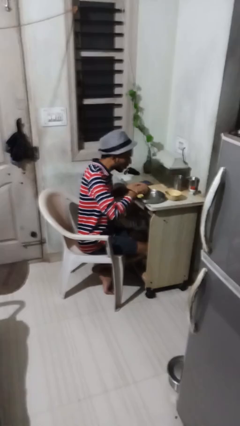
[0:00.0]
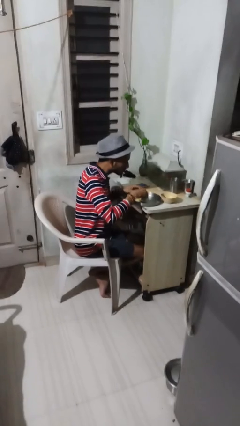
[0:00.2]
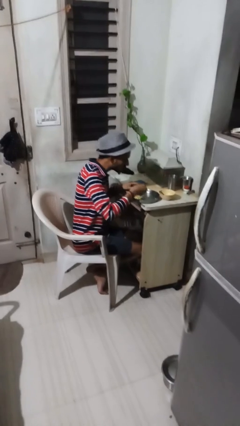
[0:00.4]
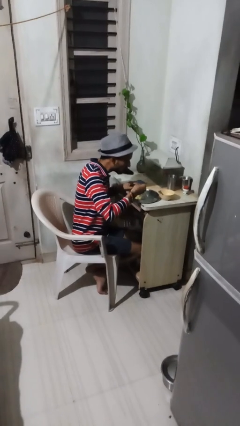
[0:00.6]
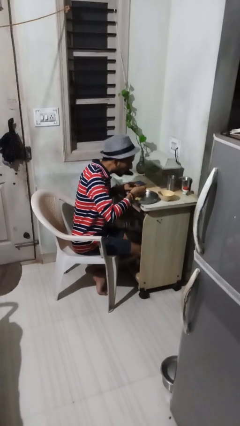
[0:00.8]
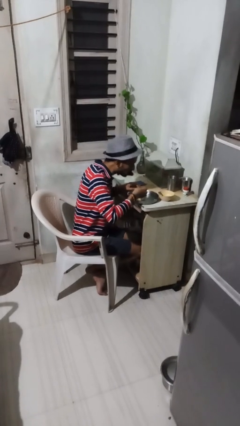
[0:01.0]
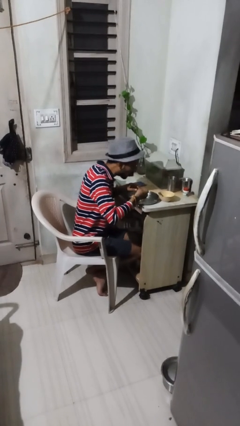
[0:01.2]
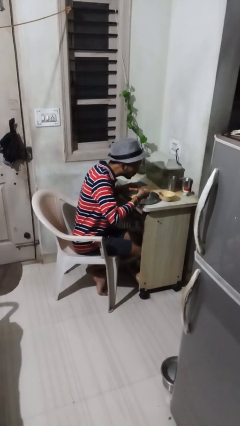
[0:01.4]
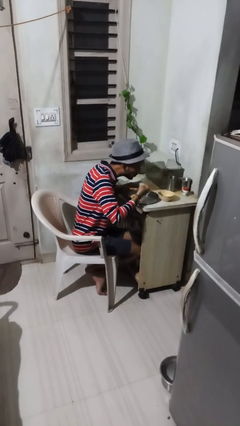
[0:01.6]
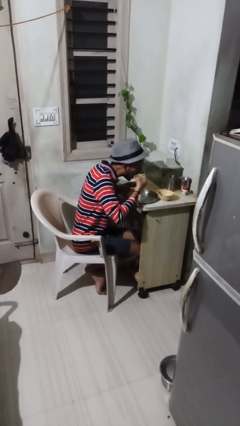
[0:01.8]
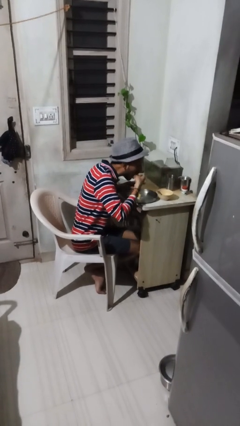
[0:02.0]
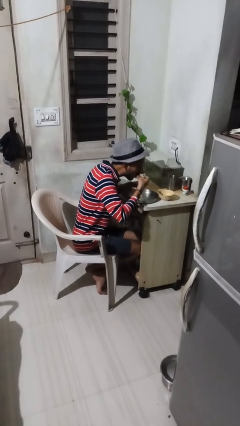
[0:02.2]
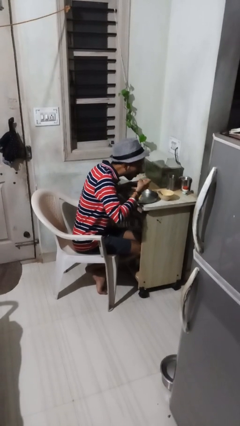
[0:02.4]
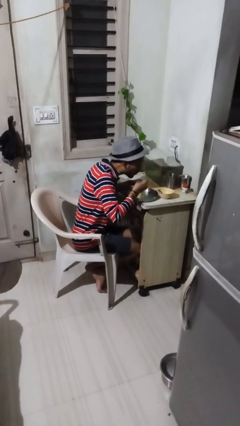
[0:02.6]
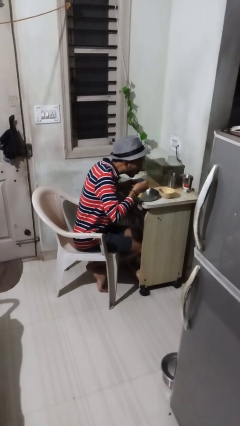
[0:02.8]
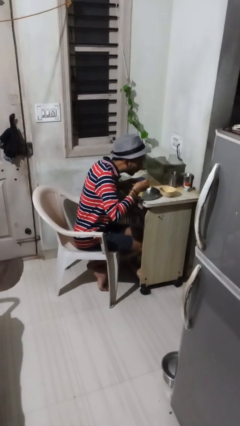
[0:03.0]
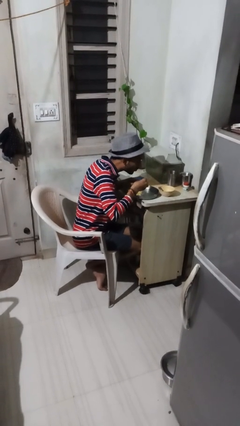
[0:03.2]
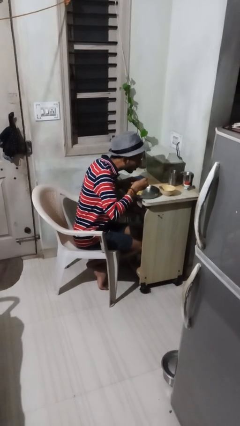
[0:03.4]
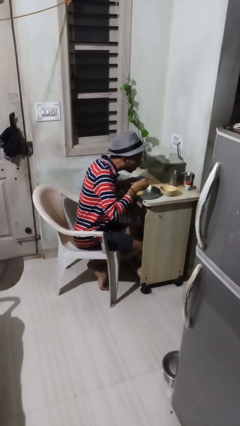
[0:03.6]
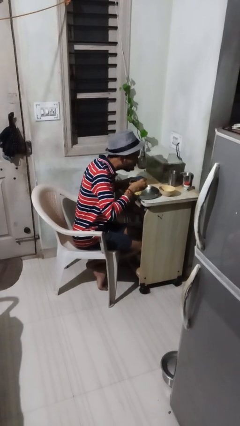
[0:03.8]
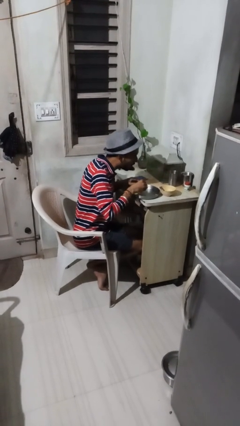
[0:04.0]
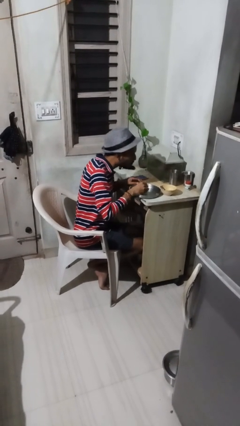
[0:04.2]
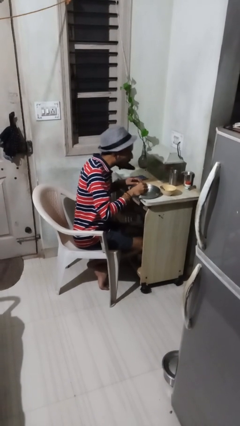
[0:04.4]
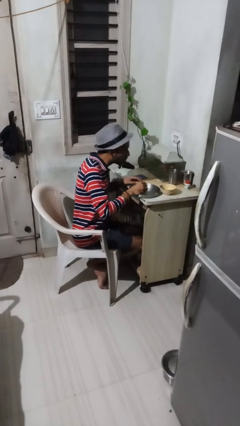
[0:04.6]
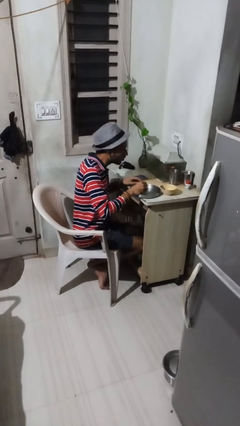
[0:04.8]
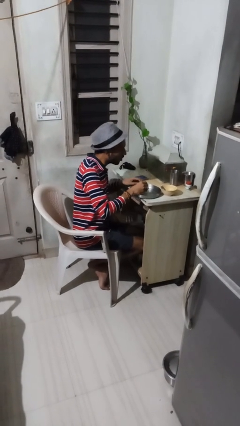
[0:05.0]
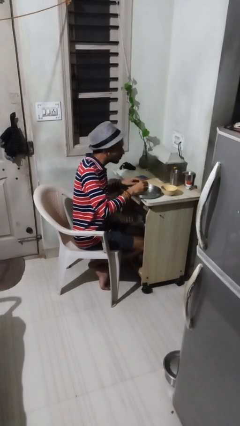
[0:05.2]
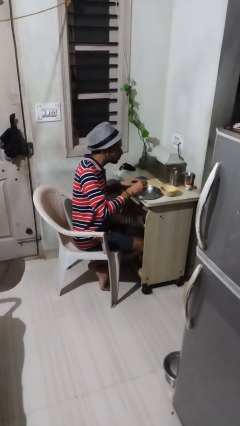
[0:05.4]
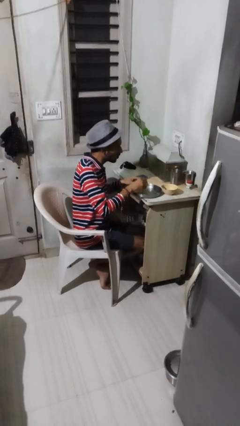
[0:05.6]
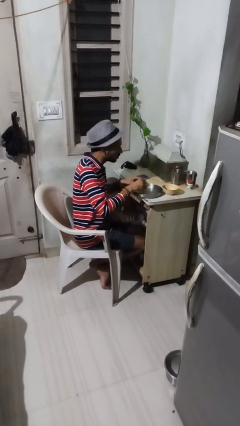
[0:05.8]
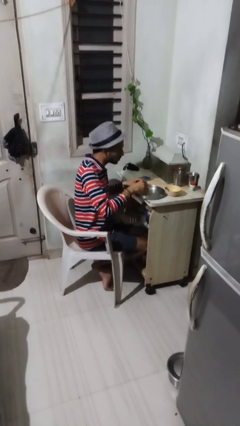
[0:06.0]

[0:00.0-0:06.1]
person eats with utensil

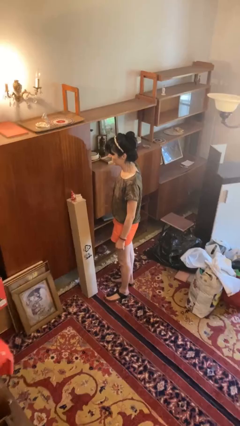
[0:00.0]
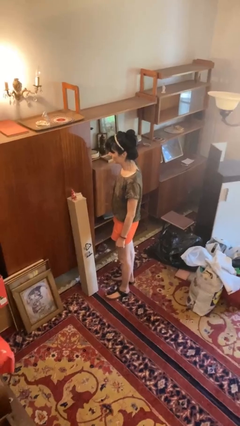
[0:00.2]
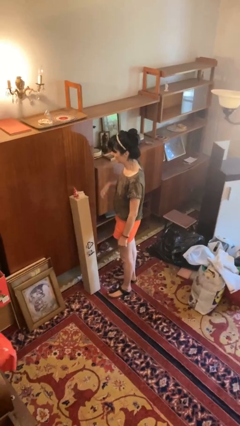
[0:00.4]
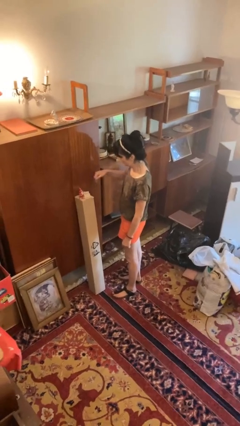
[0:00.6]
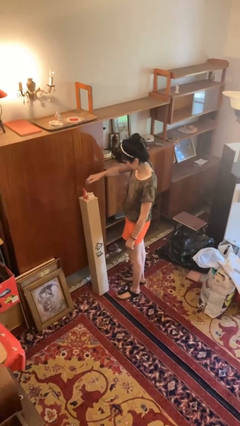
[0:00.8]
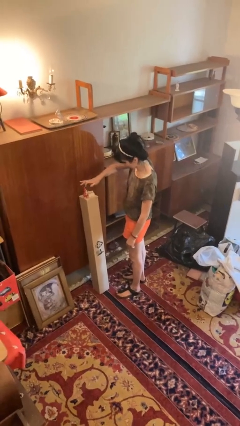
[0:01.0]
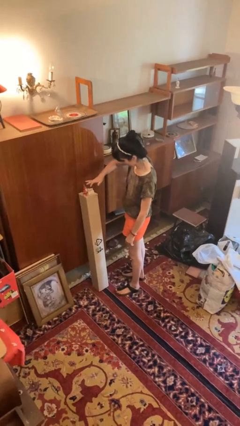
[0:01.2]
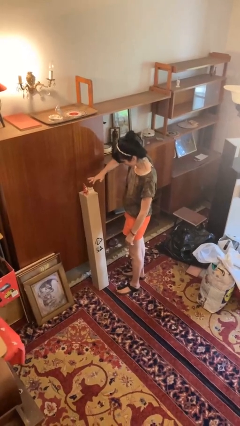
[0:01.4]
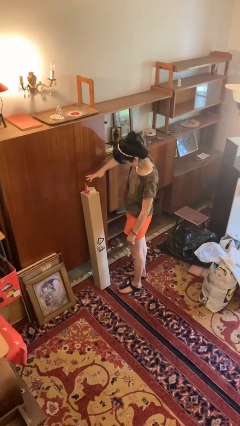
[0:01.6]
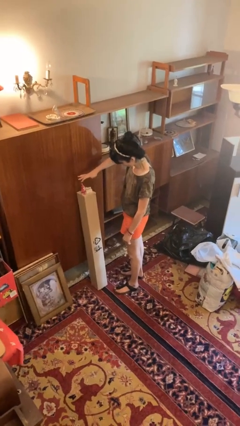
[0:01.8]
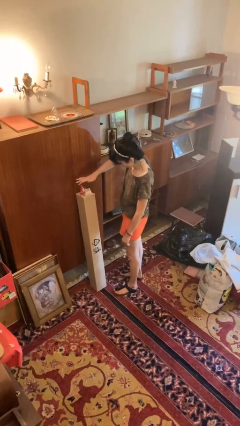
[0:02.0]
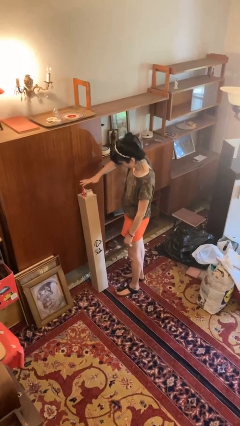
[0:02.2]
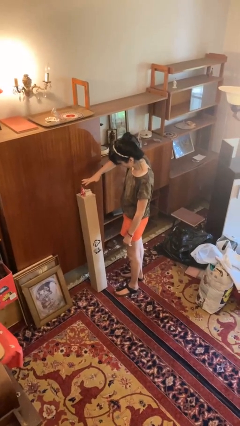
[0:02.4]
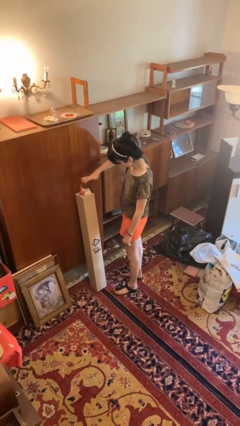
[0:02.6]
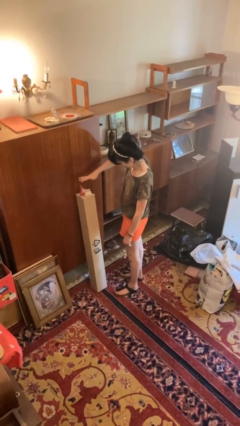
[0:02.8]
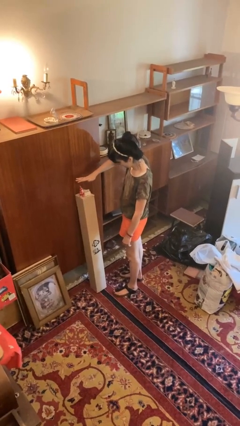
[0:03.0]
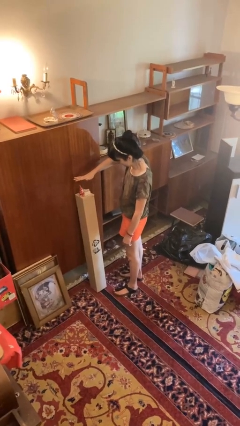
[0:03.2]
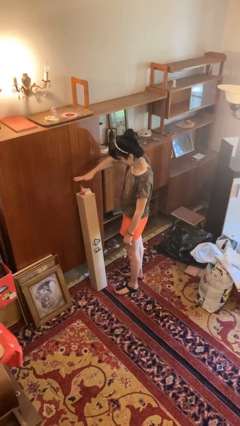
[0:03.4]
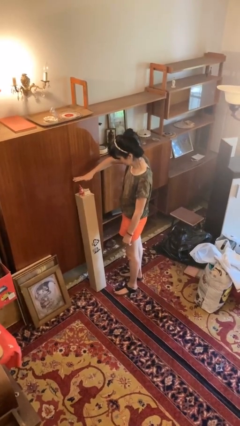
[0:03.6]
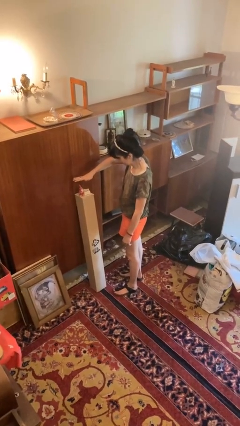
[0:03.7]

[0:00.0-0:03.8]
person waves hand over object

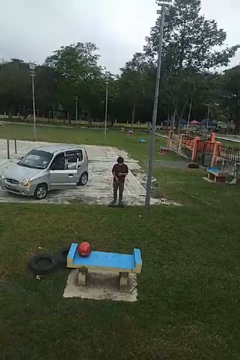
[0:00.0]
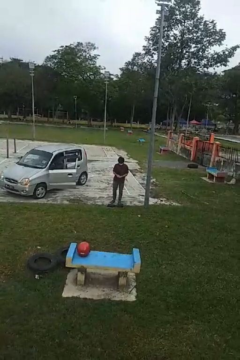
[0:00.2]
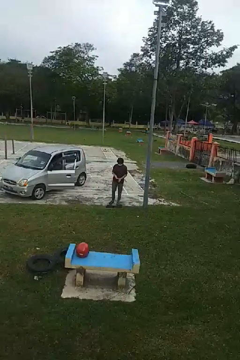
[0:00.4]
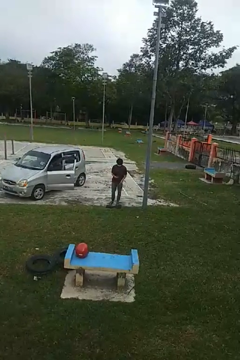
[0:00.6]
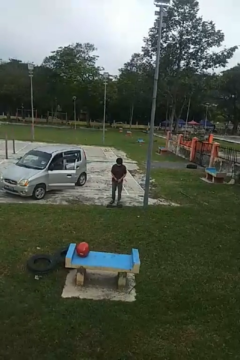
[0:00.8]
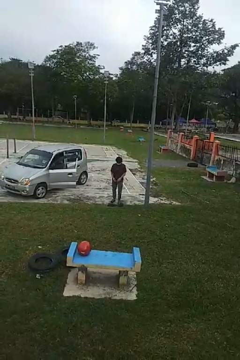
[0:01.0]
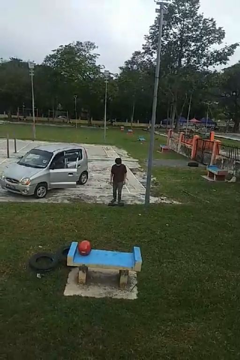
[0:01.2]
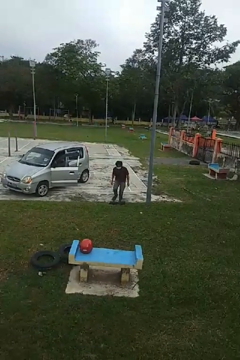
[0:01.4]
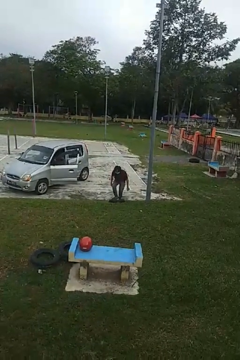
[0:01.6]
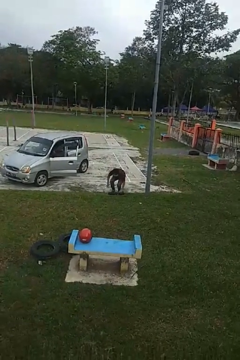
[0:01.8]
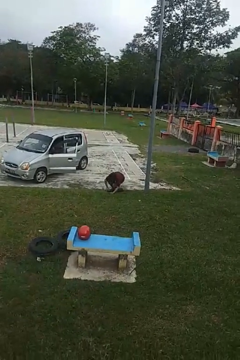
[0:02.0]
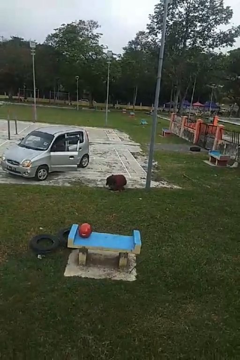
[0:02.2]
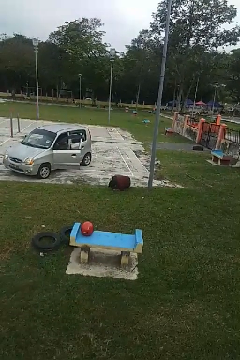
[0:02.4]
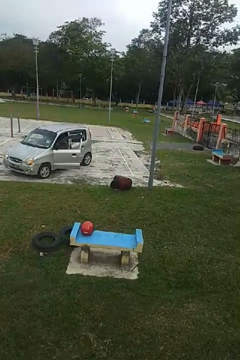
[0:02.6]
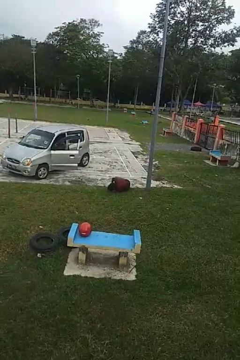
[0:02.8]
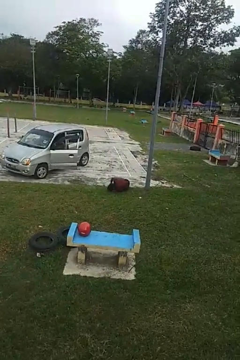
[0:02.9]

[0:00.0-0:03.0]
person trips on object on floor

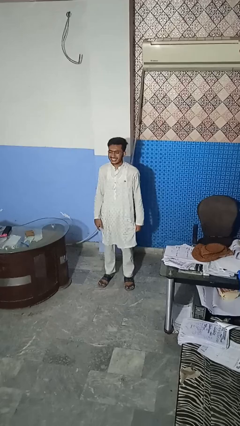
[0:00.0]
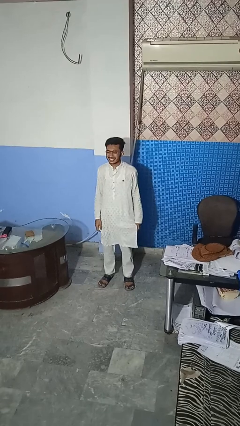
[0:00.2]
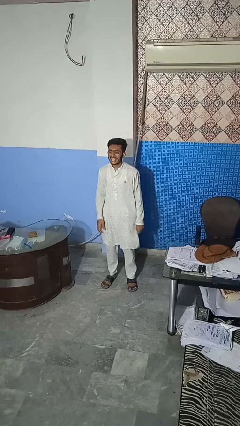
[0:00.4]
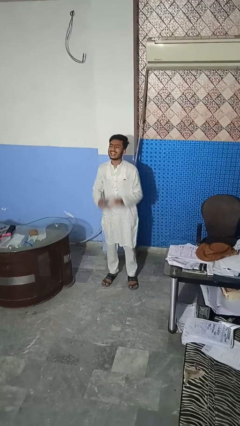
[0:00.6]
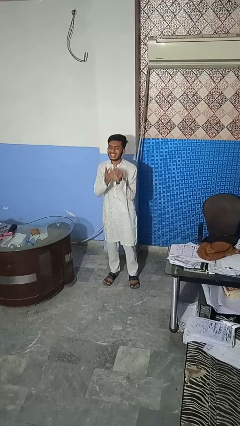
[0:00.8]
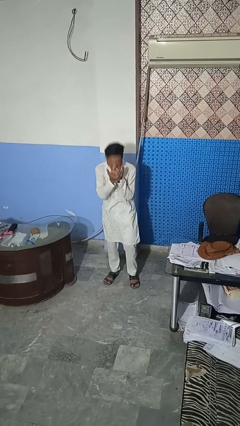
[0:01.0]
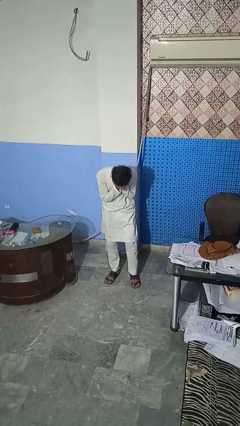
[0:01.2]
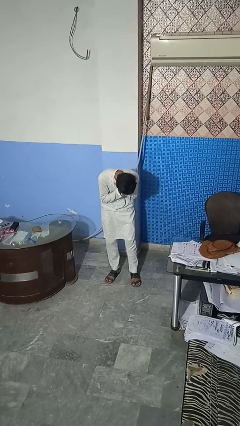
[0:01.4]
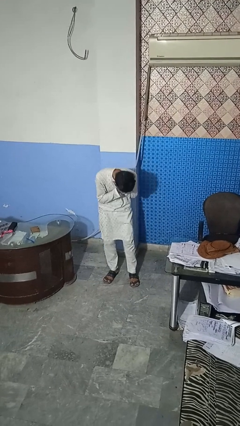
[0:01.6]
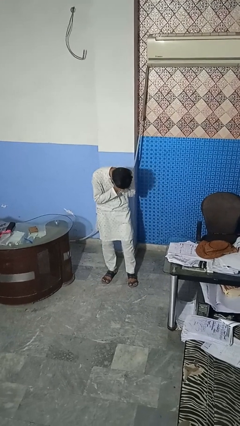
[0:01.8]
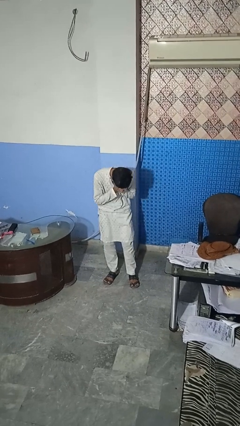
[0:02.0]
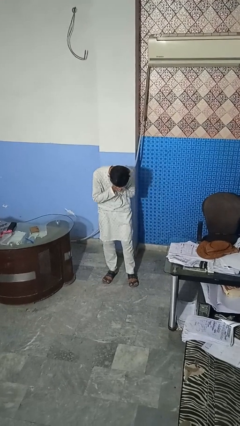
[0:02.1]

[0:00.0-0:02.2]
person sneezes into hand

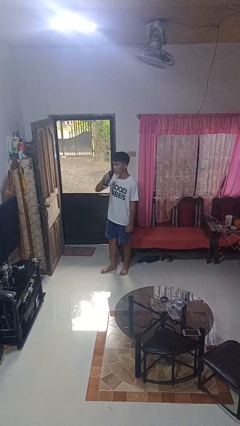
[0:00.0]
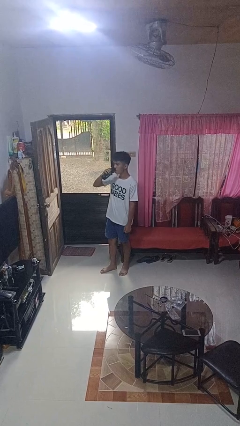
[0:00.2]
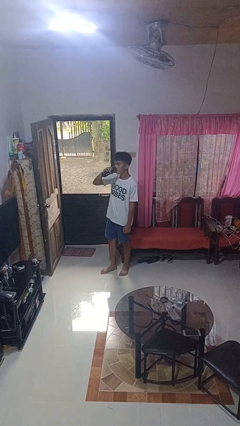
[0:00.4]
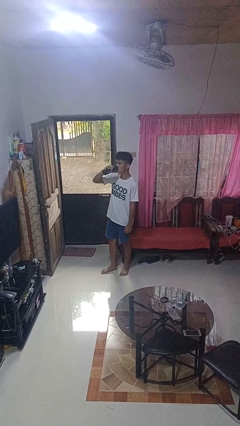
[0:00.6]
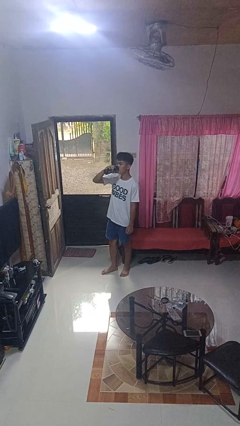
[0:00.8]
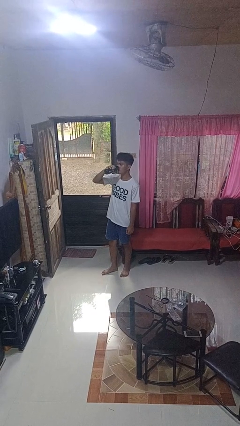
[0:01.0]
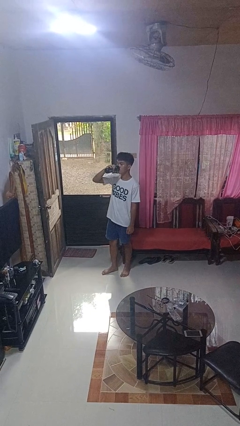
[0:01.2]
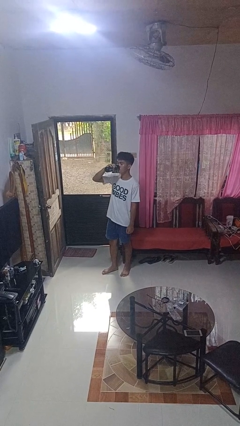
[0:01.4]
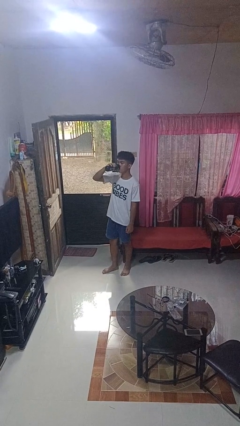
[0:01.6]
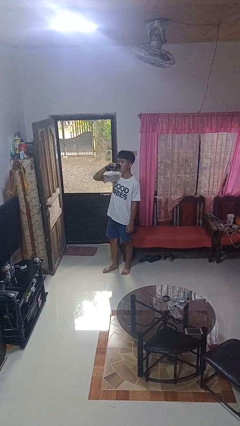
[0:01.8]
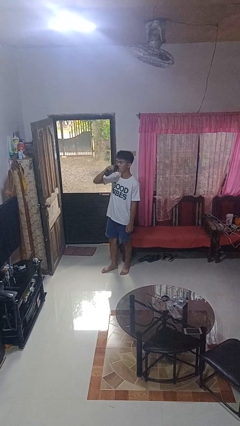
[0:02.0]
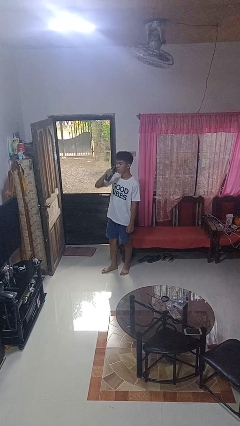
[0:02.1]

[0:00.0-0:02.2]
person drinks from bottle

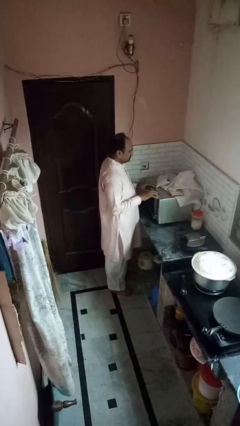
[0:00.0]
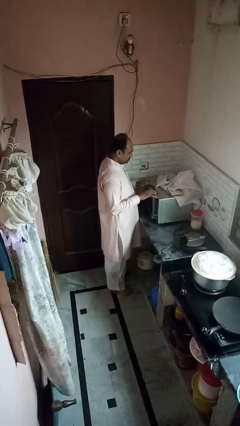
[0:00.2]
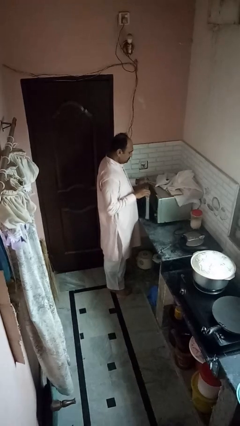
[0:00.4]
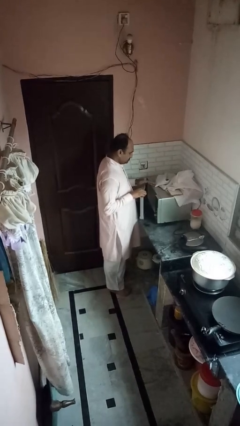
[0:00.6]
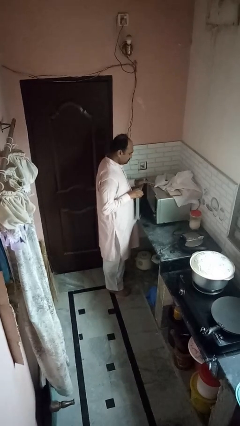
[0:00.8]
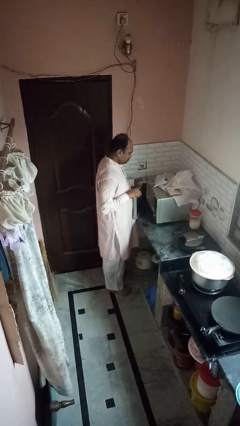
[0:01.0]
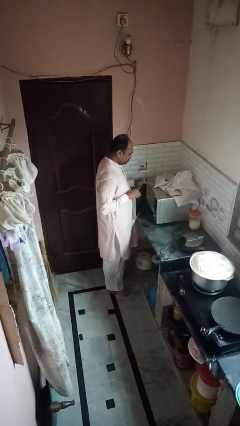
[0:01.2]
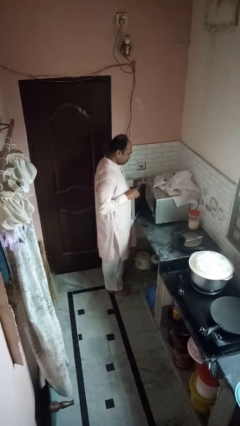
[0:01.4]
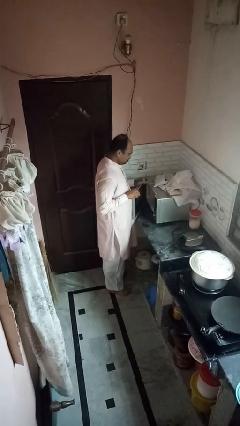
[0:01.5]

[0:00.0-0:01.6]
person opens oven door
